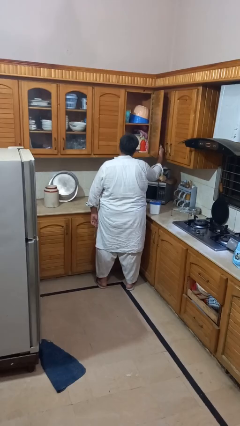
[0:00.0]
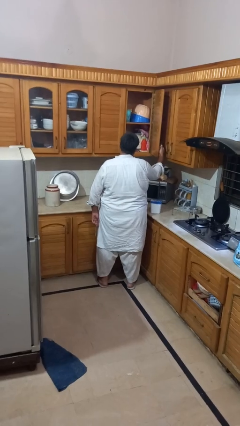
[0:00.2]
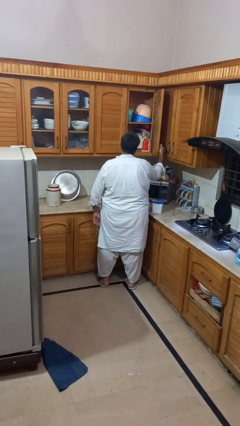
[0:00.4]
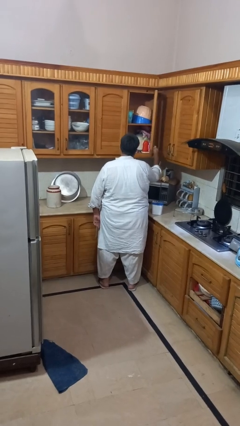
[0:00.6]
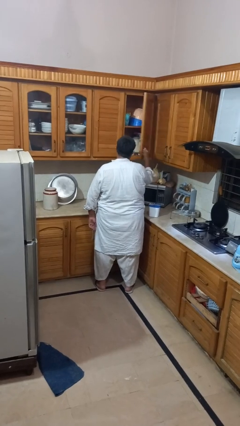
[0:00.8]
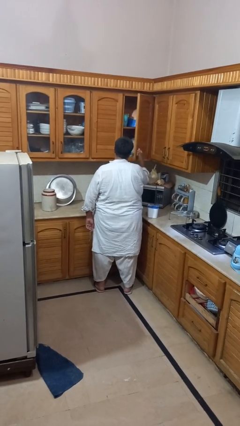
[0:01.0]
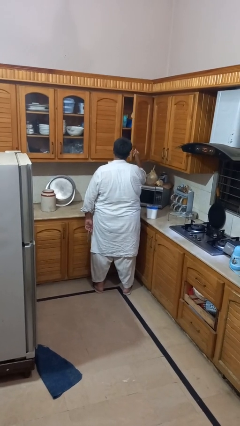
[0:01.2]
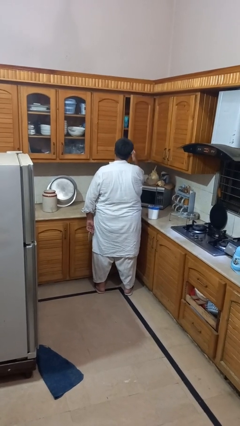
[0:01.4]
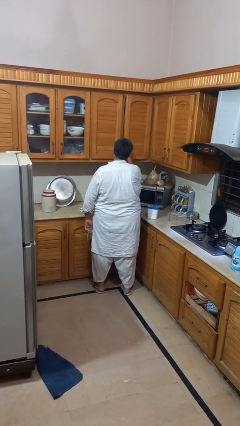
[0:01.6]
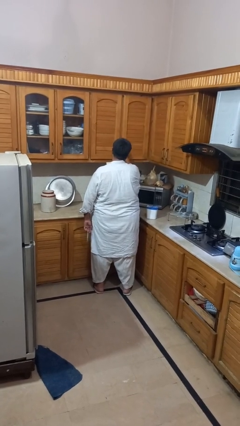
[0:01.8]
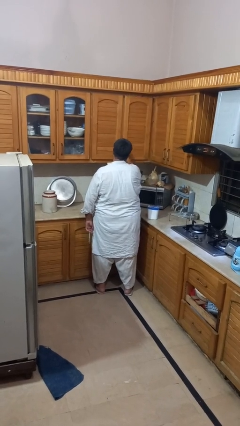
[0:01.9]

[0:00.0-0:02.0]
person closes cabinet

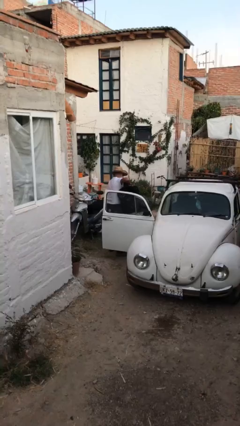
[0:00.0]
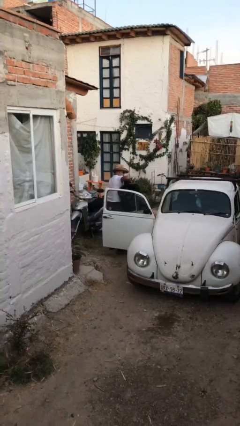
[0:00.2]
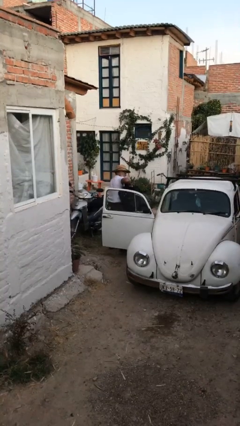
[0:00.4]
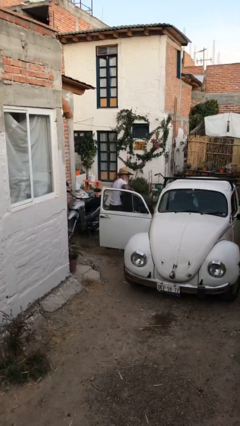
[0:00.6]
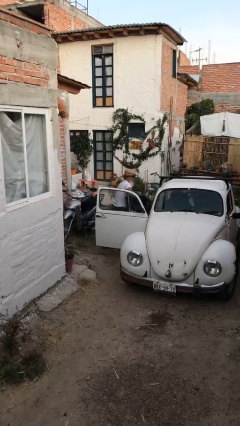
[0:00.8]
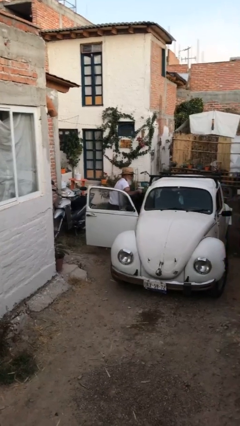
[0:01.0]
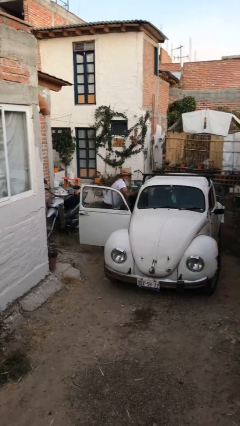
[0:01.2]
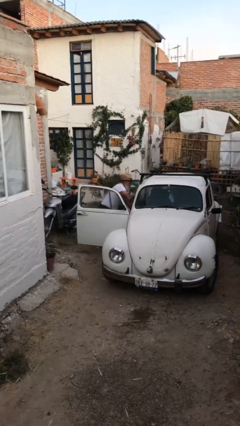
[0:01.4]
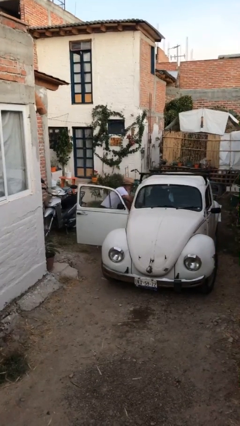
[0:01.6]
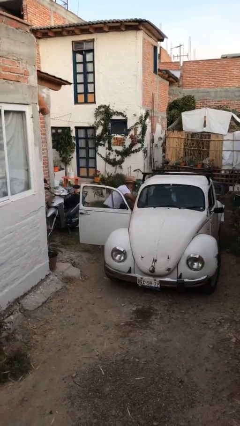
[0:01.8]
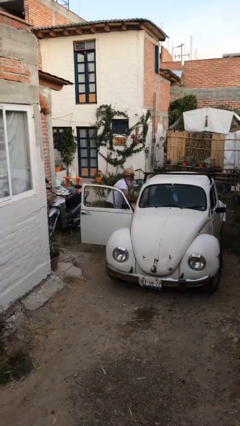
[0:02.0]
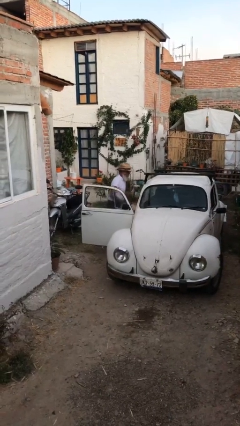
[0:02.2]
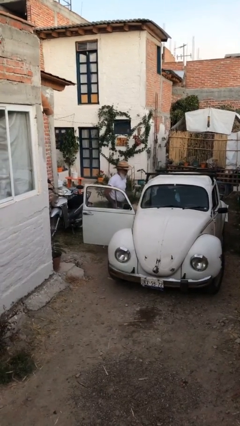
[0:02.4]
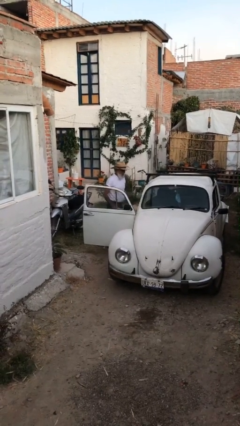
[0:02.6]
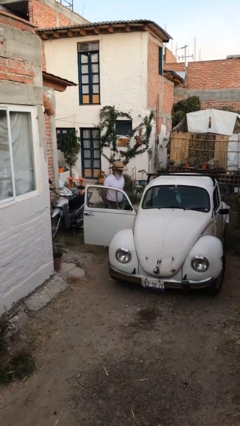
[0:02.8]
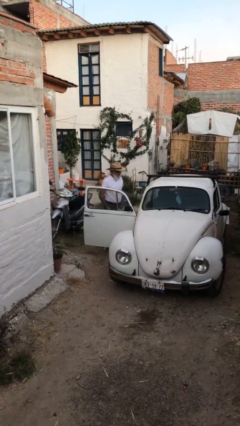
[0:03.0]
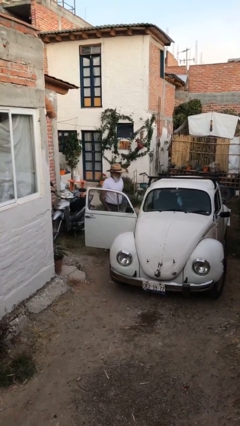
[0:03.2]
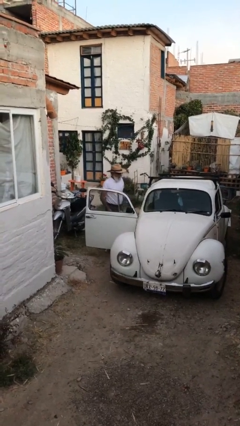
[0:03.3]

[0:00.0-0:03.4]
person loads car

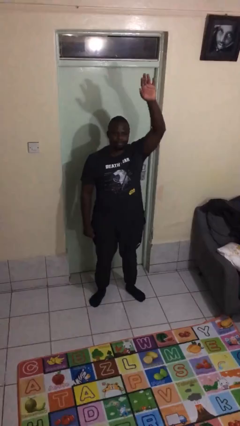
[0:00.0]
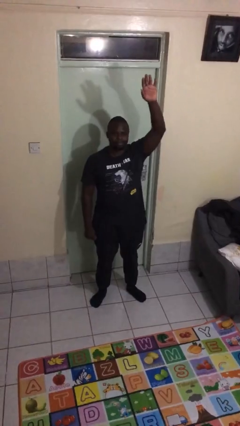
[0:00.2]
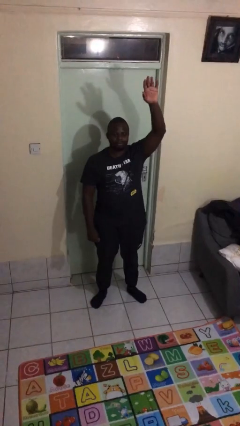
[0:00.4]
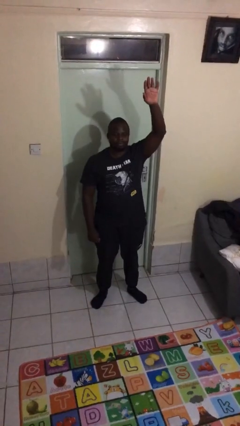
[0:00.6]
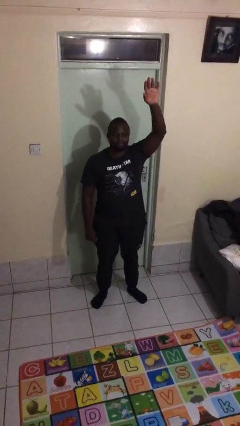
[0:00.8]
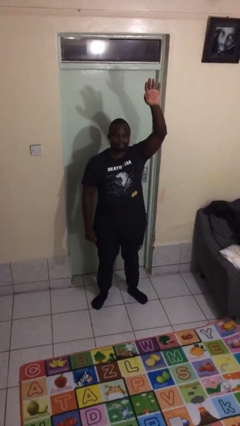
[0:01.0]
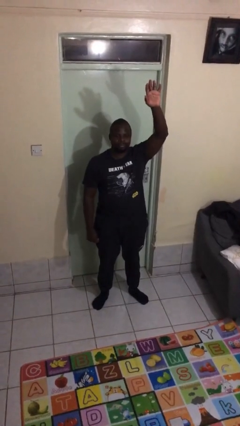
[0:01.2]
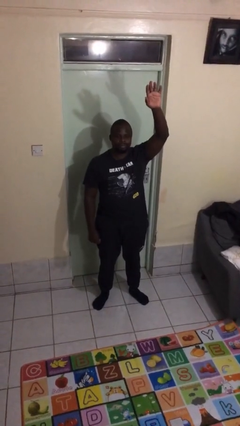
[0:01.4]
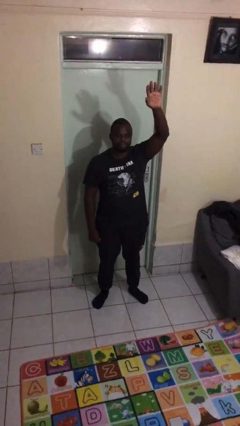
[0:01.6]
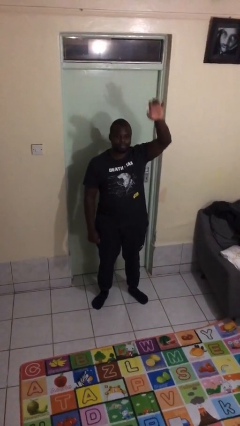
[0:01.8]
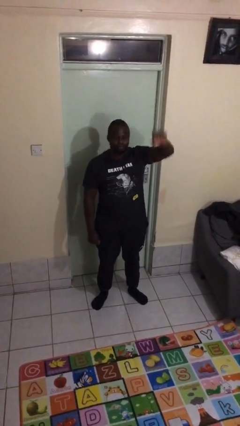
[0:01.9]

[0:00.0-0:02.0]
person gestures raise hand

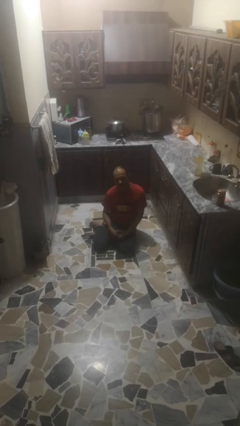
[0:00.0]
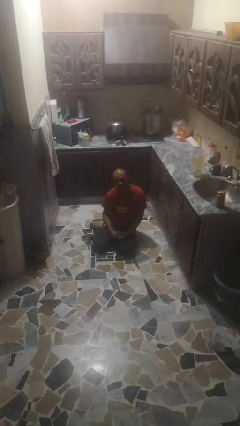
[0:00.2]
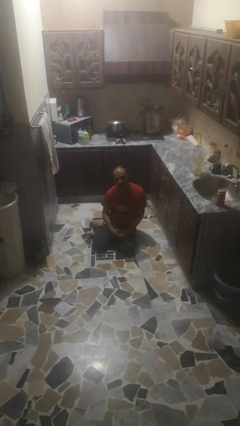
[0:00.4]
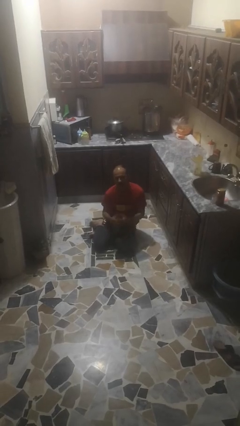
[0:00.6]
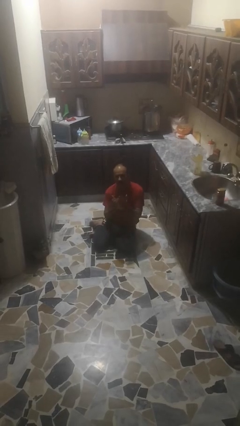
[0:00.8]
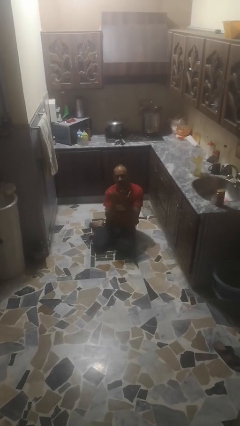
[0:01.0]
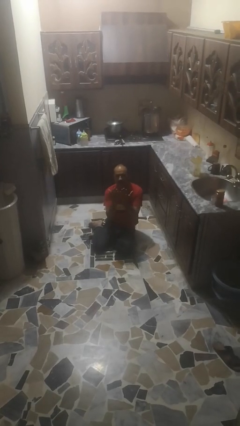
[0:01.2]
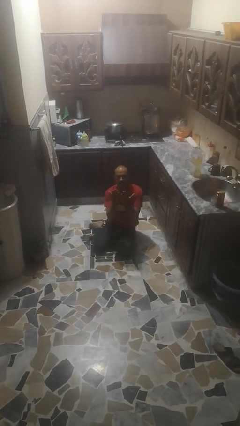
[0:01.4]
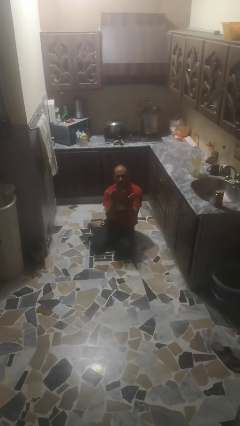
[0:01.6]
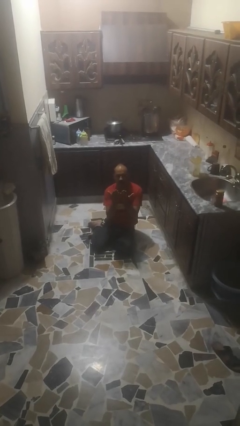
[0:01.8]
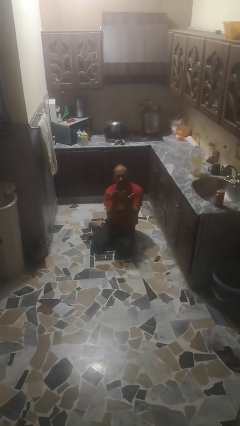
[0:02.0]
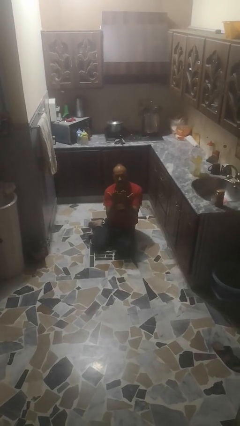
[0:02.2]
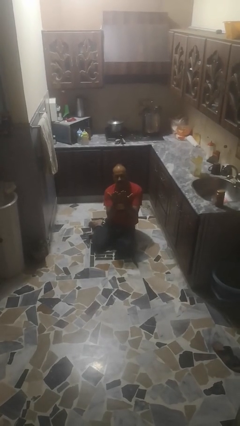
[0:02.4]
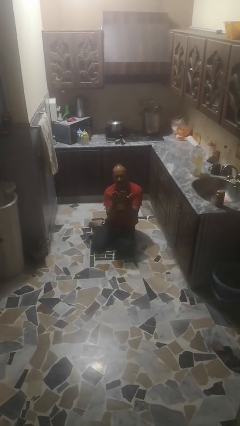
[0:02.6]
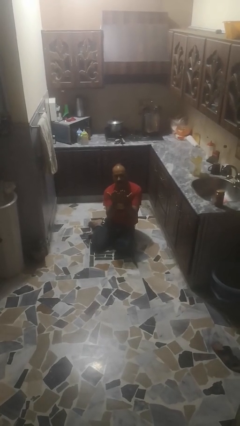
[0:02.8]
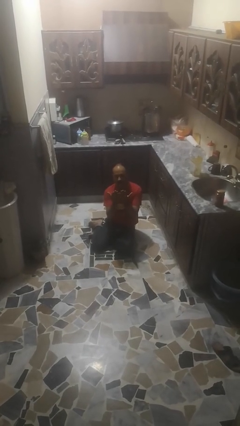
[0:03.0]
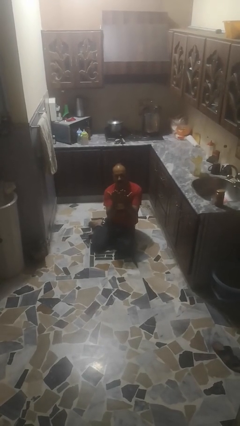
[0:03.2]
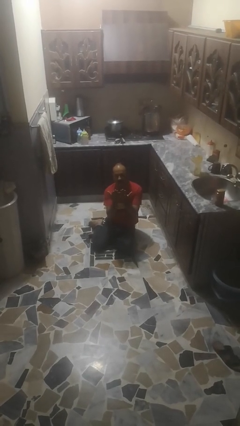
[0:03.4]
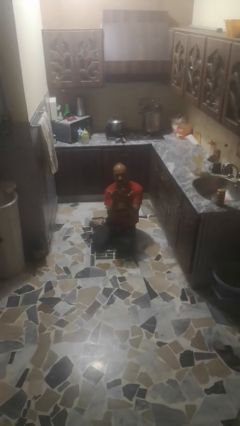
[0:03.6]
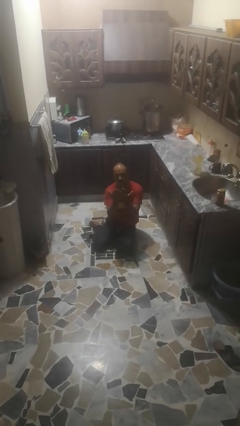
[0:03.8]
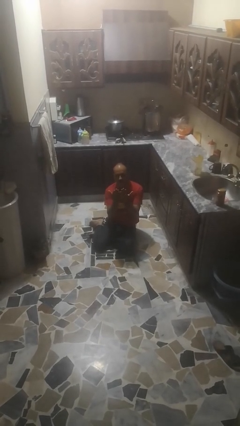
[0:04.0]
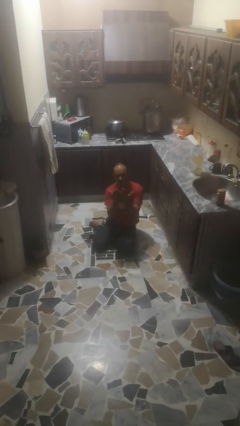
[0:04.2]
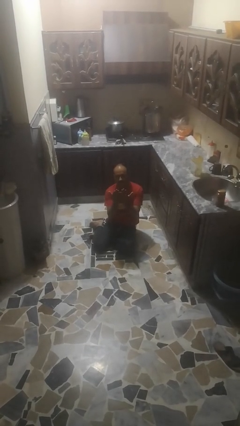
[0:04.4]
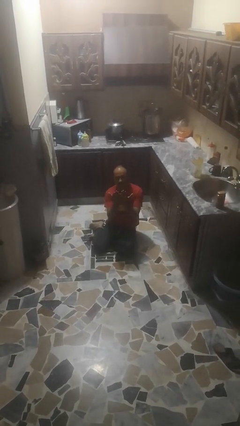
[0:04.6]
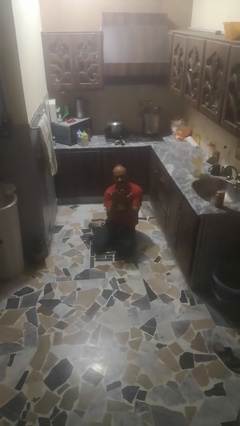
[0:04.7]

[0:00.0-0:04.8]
person prays

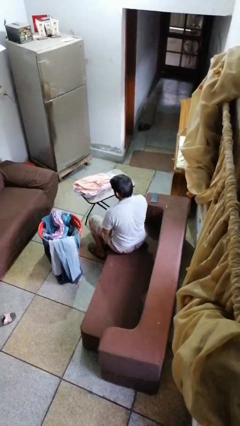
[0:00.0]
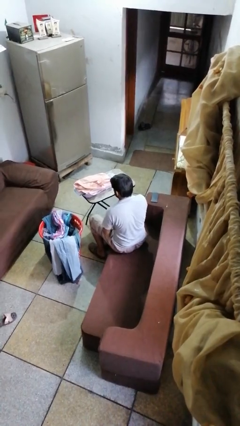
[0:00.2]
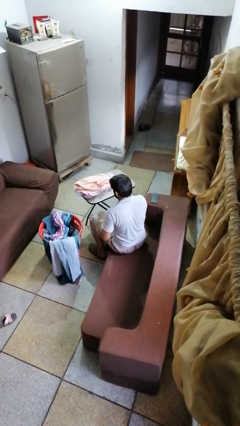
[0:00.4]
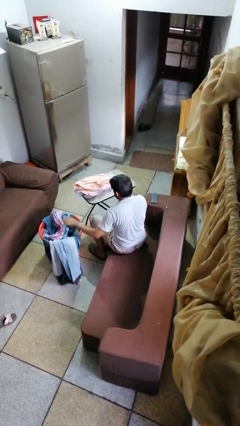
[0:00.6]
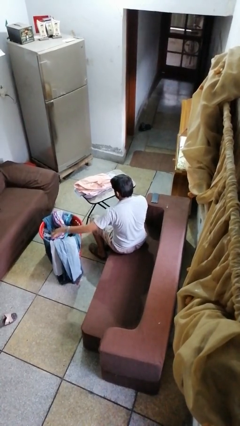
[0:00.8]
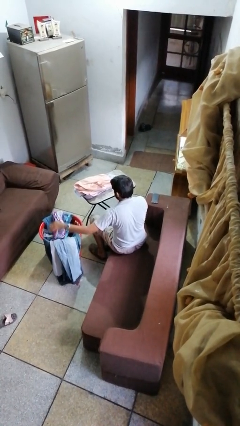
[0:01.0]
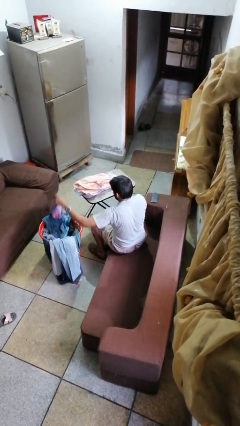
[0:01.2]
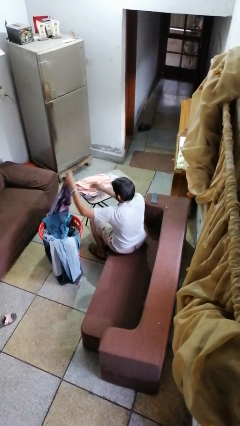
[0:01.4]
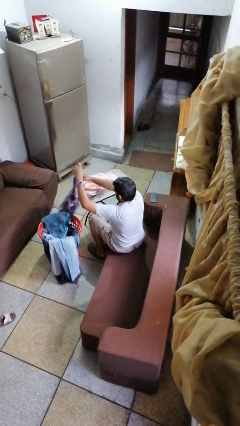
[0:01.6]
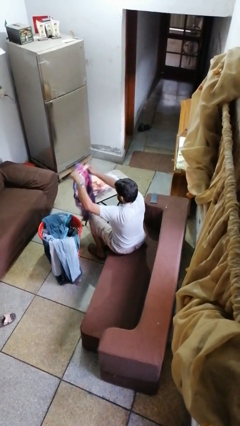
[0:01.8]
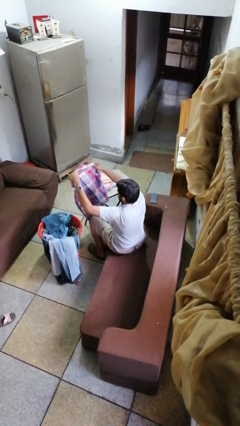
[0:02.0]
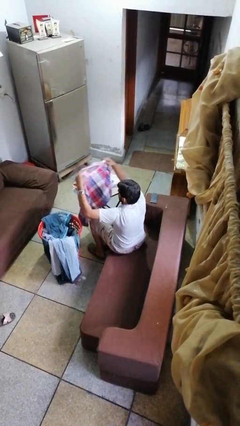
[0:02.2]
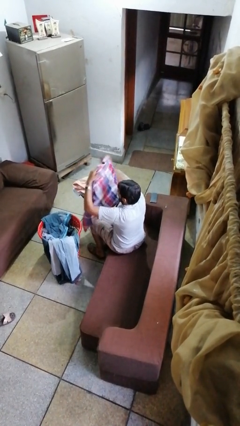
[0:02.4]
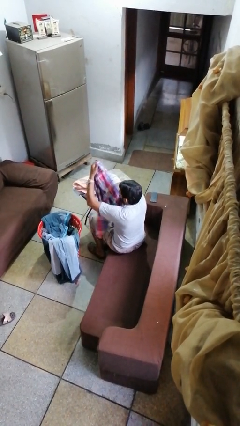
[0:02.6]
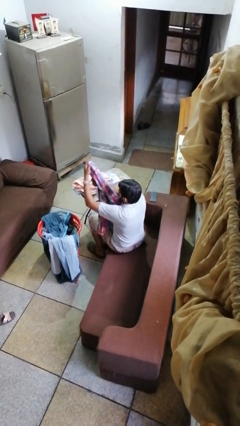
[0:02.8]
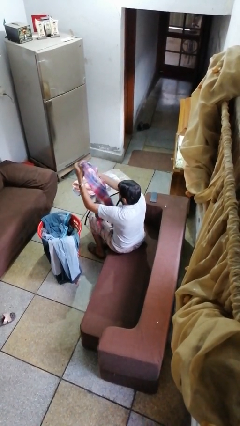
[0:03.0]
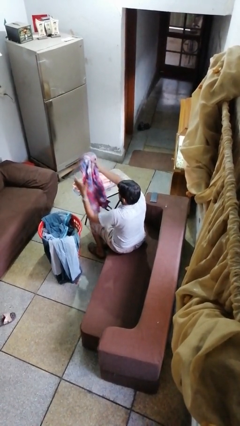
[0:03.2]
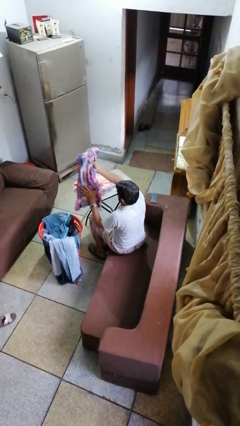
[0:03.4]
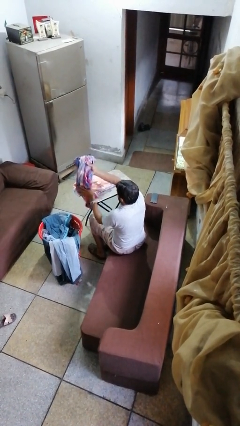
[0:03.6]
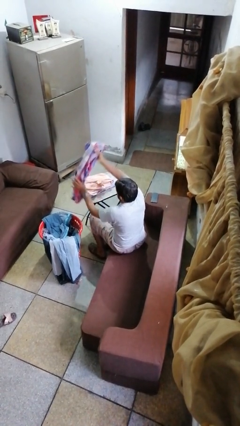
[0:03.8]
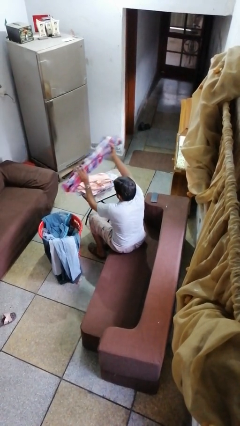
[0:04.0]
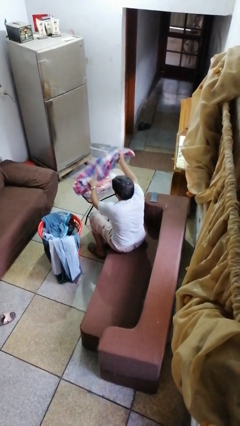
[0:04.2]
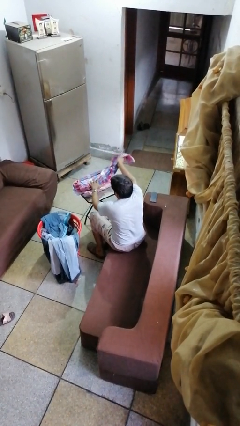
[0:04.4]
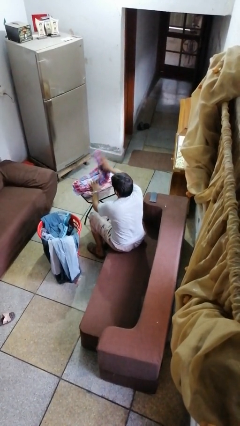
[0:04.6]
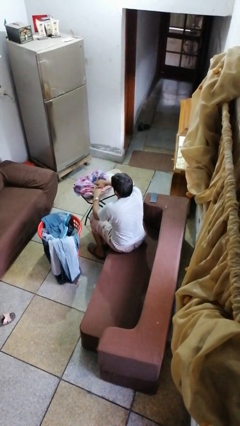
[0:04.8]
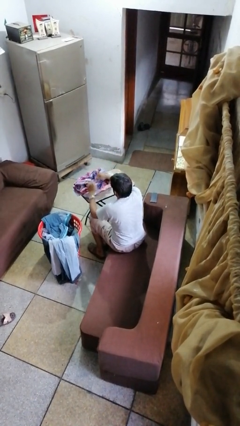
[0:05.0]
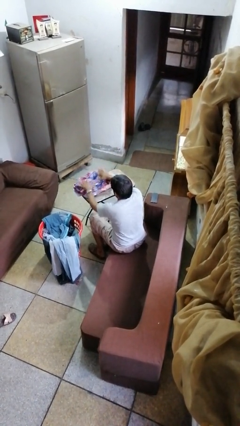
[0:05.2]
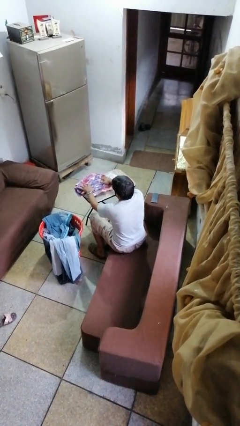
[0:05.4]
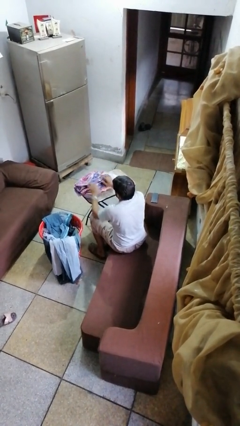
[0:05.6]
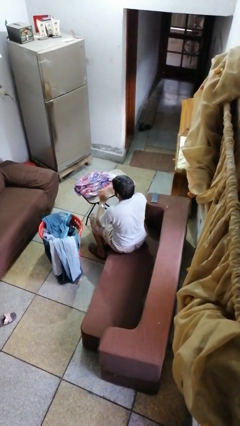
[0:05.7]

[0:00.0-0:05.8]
person folds shirt

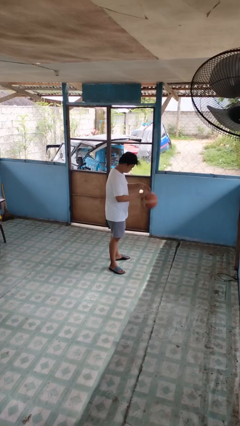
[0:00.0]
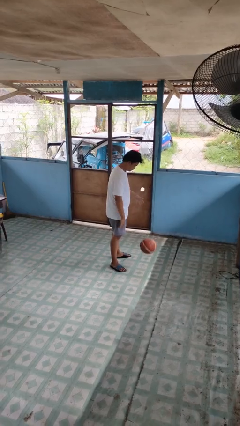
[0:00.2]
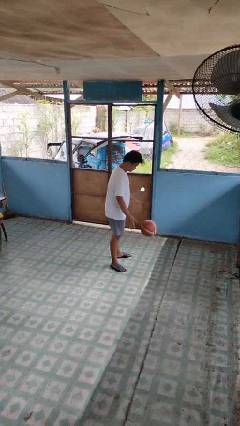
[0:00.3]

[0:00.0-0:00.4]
person bounces ball on floor
